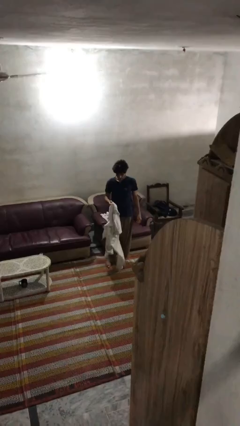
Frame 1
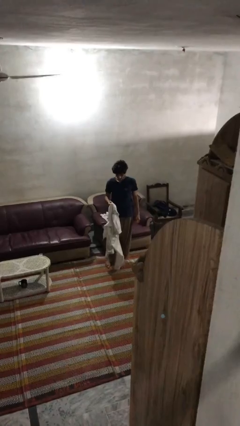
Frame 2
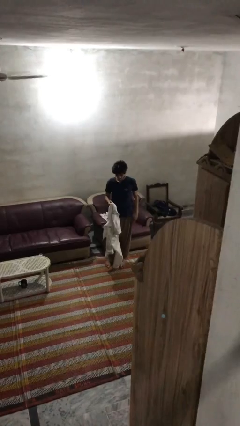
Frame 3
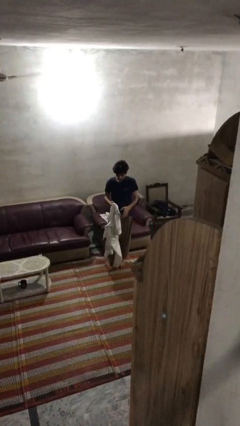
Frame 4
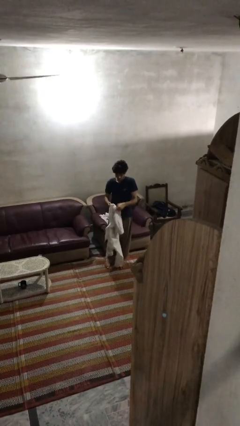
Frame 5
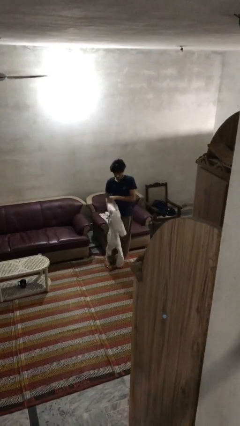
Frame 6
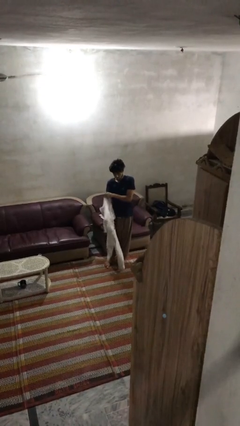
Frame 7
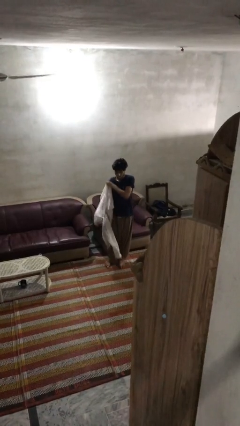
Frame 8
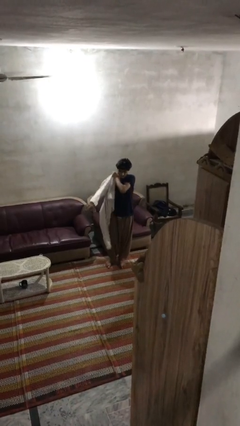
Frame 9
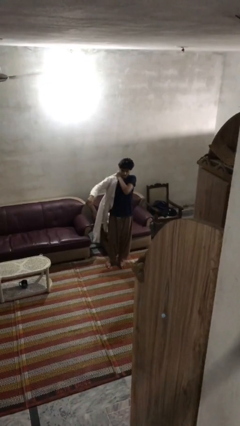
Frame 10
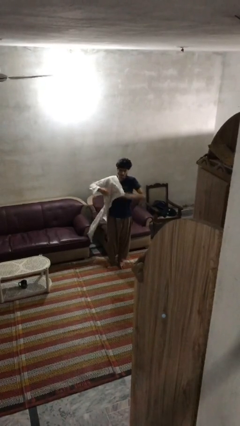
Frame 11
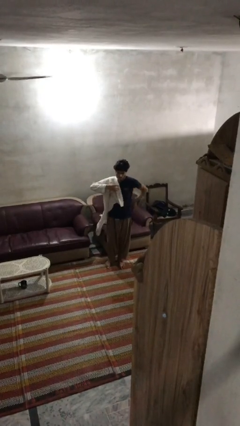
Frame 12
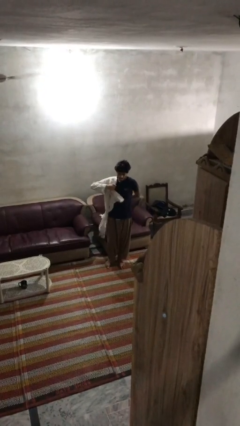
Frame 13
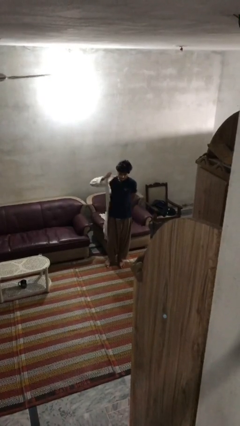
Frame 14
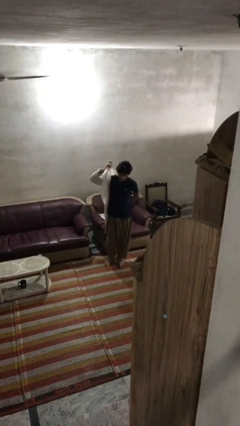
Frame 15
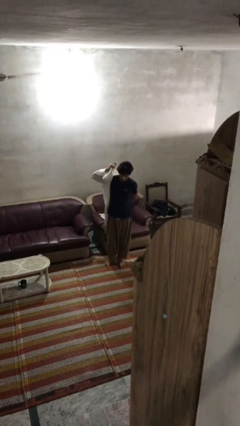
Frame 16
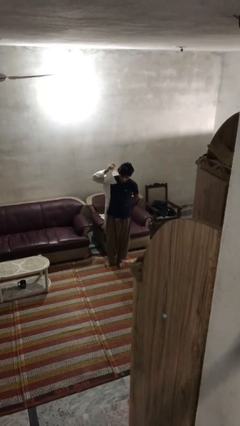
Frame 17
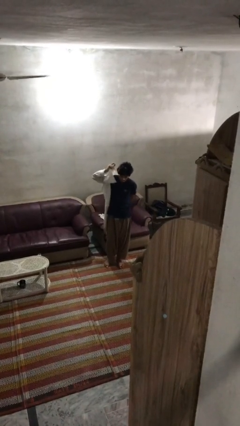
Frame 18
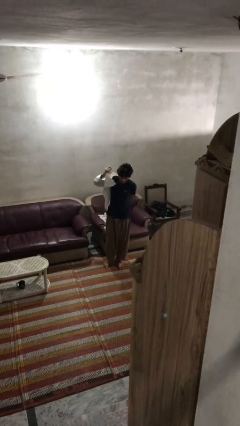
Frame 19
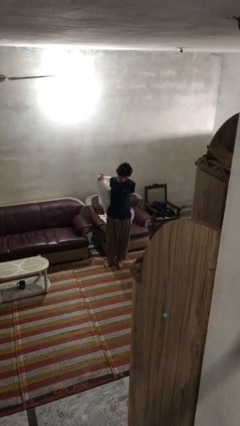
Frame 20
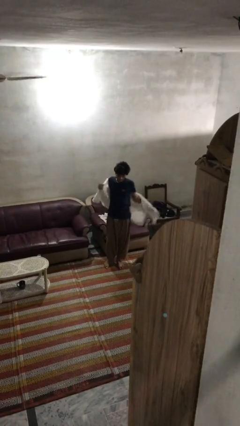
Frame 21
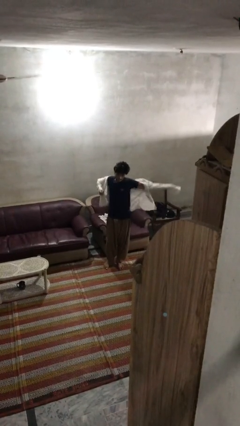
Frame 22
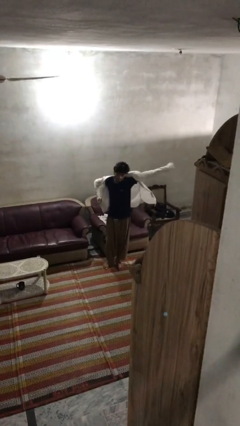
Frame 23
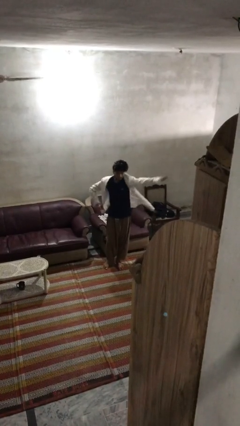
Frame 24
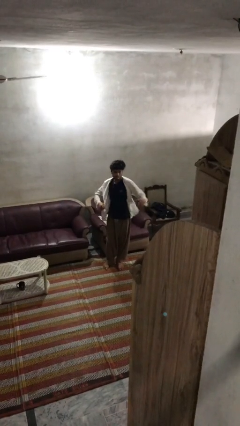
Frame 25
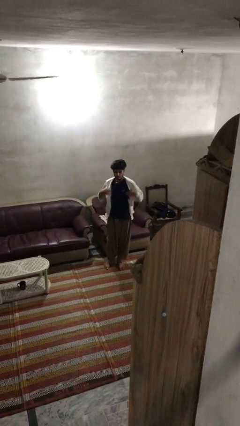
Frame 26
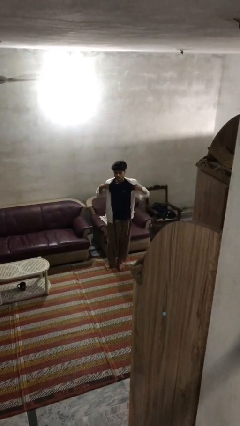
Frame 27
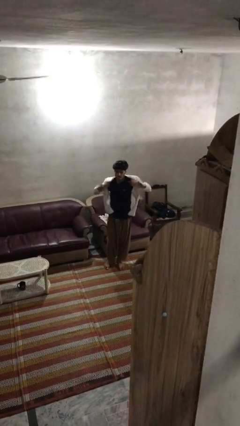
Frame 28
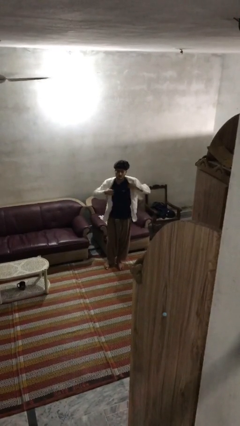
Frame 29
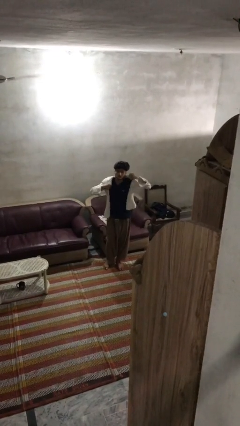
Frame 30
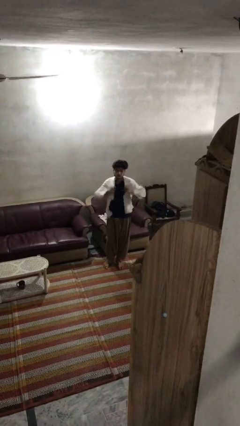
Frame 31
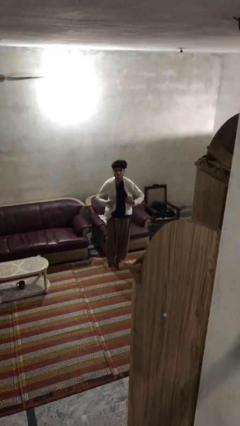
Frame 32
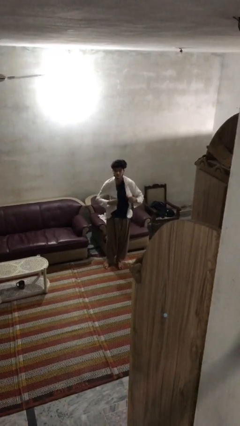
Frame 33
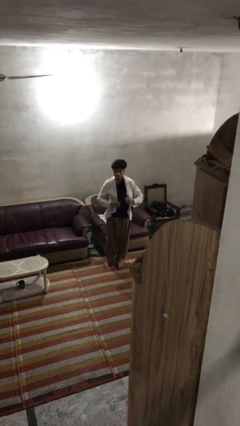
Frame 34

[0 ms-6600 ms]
person puts on shirt

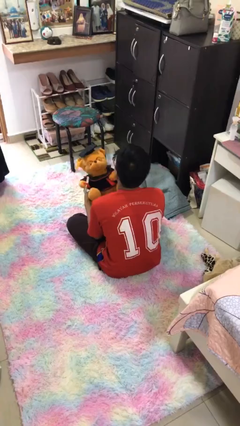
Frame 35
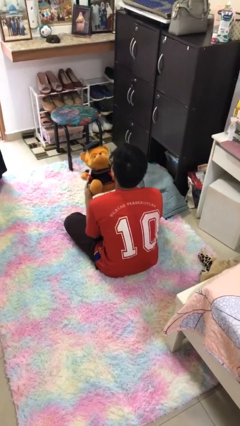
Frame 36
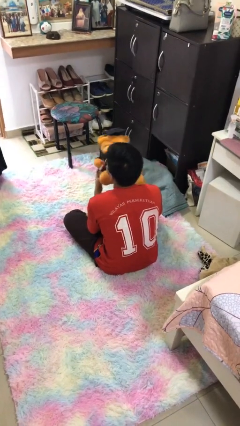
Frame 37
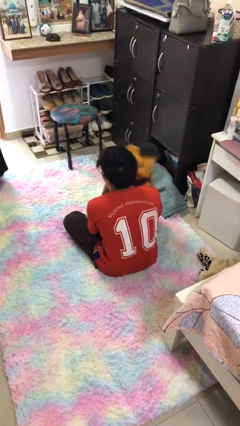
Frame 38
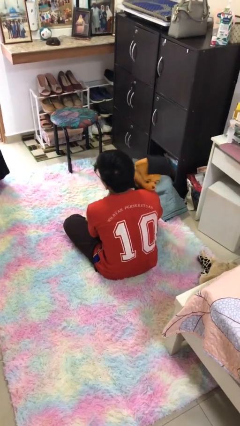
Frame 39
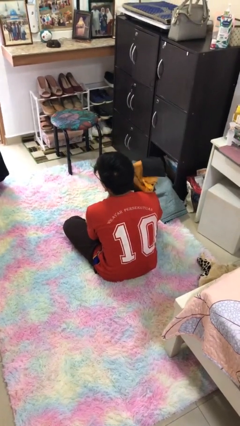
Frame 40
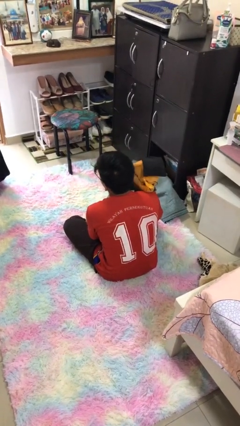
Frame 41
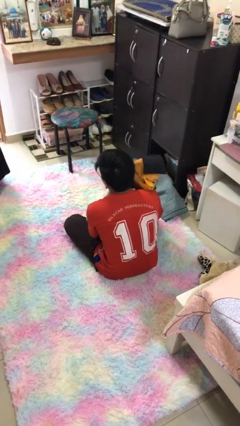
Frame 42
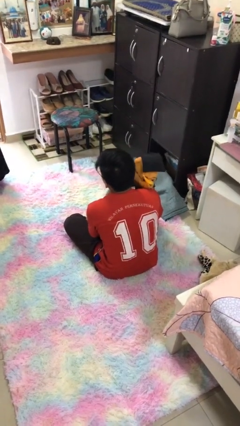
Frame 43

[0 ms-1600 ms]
person hugs stuffed animal

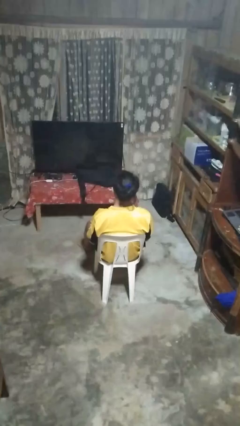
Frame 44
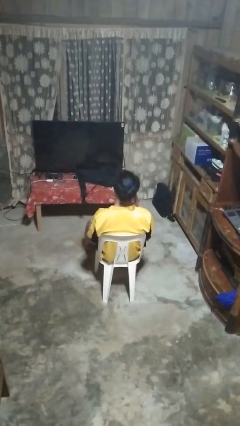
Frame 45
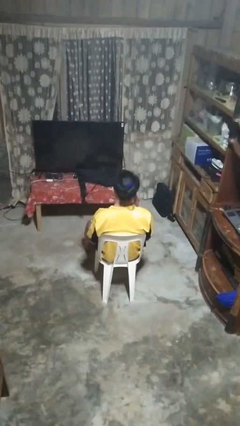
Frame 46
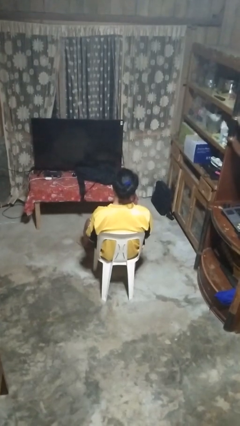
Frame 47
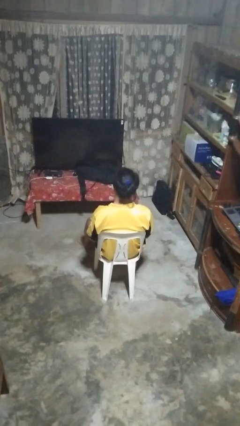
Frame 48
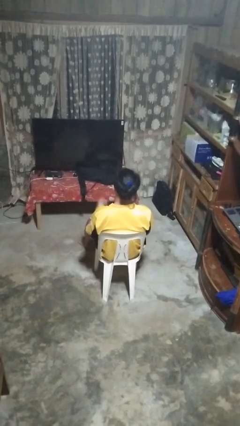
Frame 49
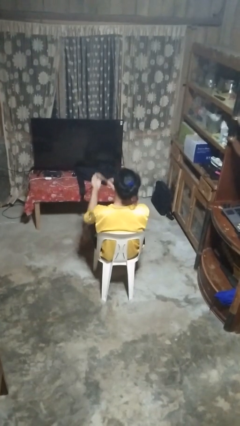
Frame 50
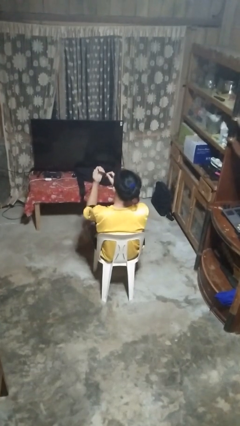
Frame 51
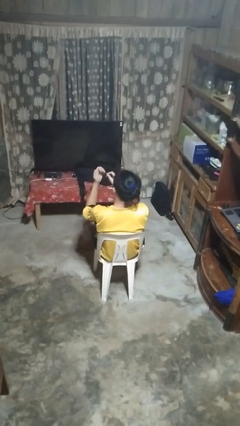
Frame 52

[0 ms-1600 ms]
person files fingernails

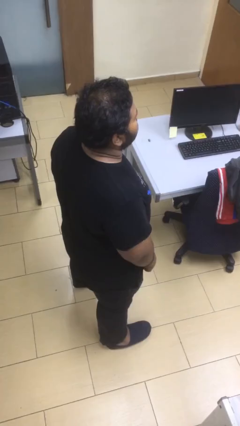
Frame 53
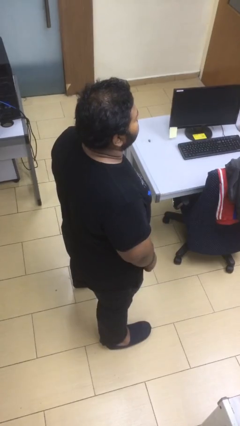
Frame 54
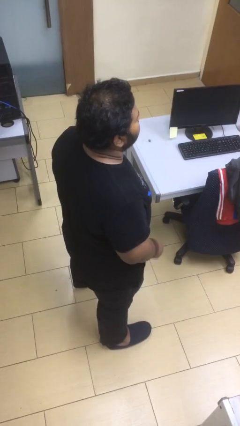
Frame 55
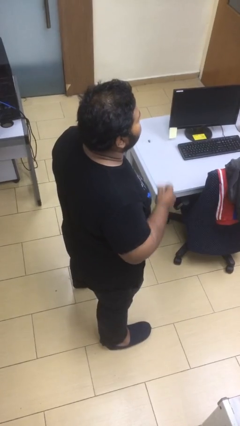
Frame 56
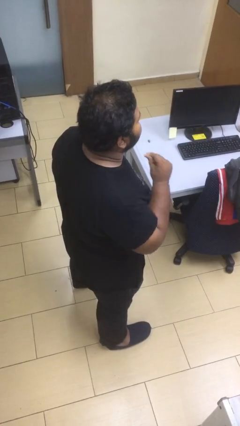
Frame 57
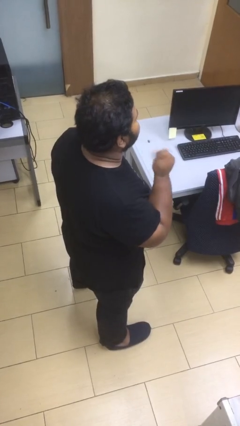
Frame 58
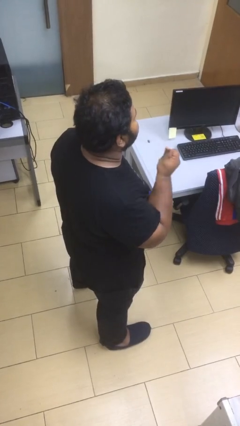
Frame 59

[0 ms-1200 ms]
person snaps fingers

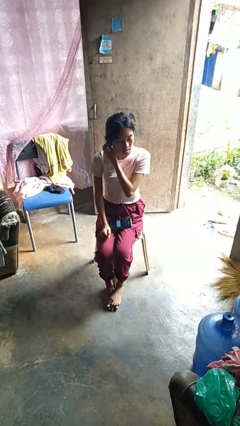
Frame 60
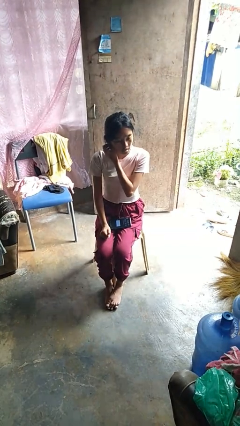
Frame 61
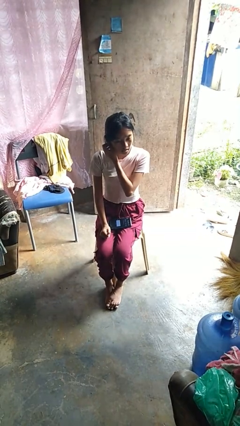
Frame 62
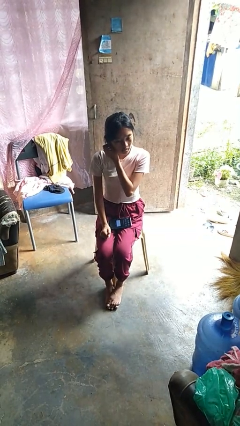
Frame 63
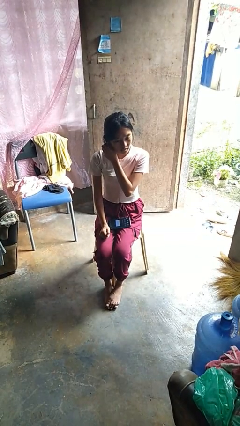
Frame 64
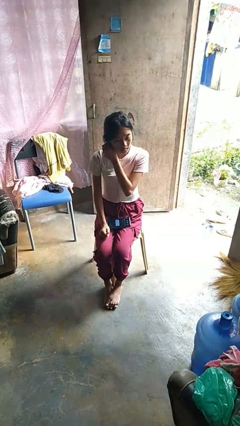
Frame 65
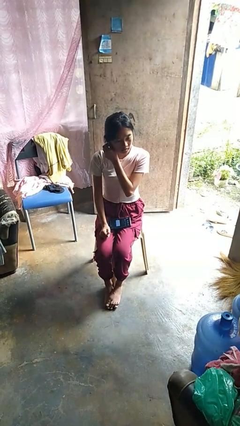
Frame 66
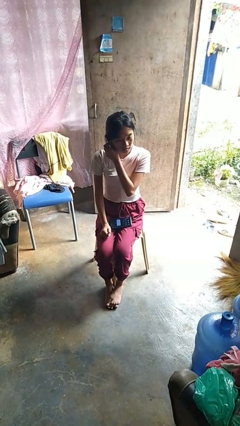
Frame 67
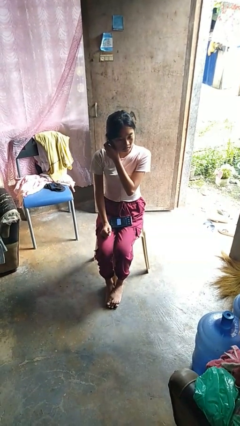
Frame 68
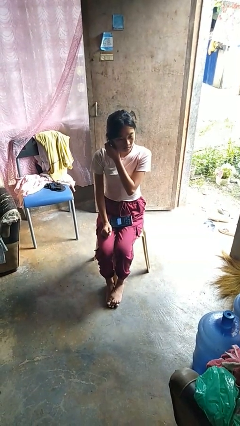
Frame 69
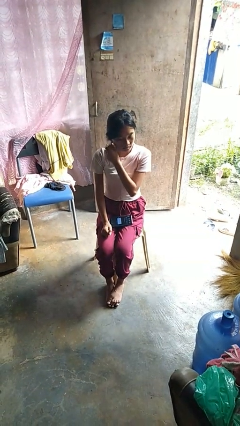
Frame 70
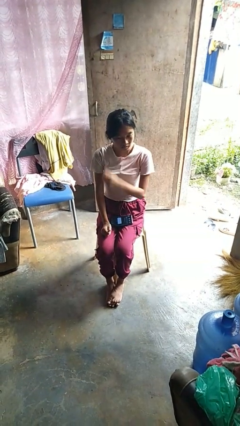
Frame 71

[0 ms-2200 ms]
person touches earlobe

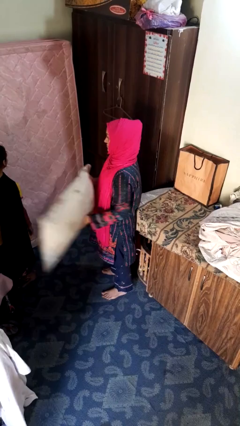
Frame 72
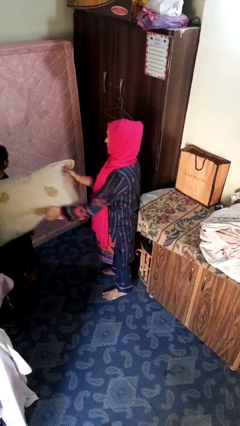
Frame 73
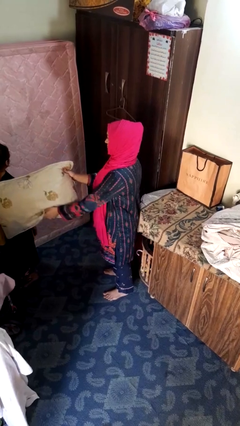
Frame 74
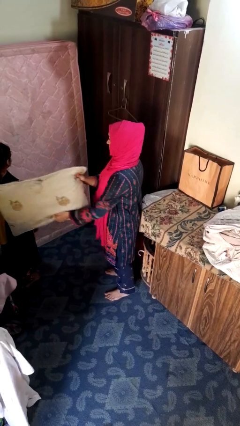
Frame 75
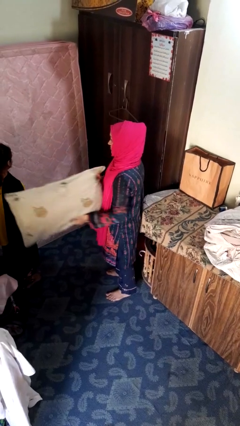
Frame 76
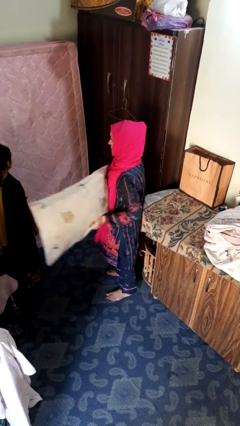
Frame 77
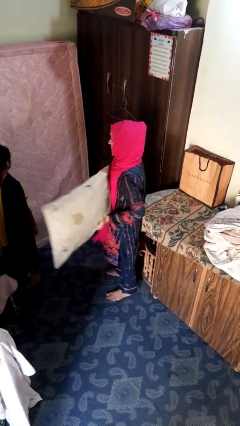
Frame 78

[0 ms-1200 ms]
person hits person with pillow

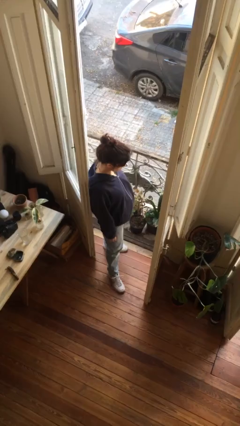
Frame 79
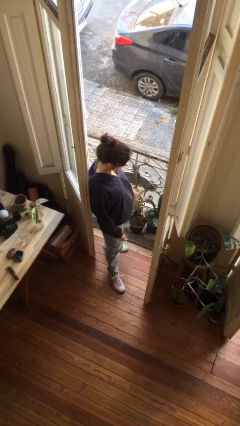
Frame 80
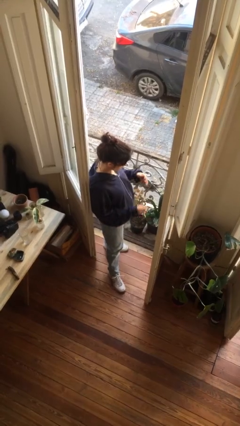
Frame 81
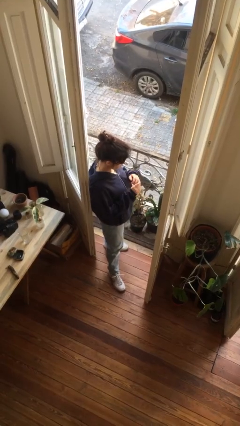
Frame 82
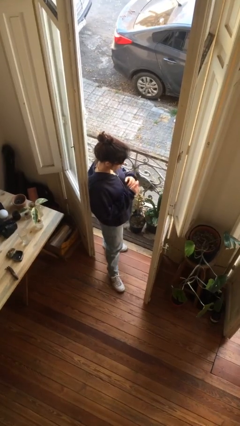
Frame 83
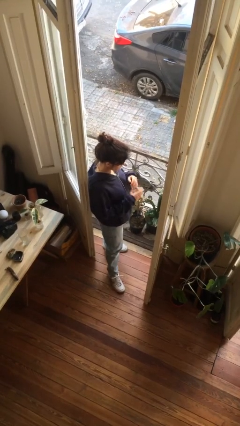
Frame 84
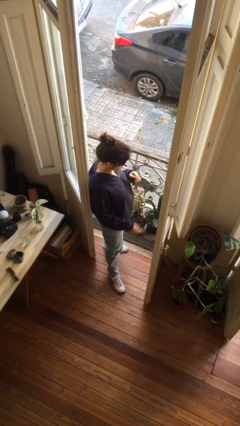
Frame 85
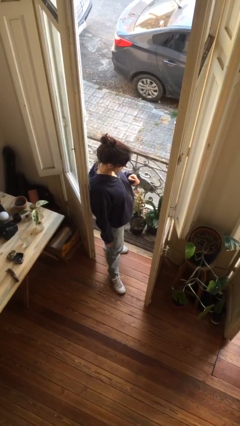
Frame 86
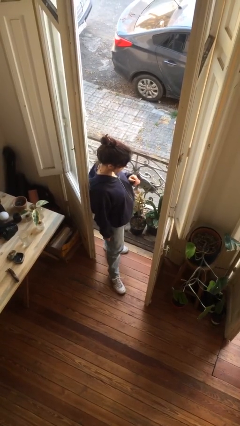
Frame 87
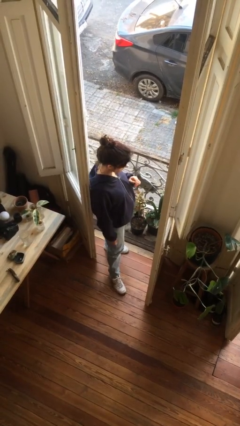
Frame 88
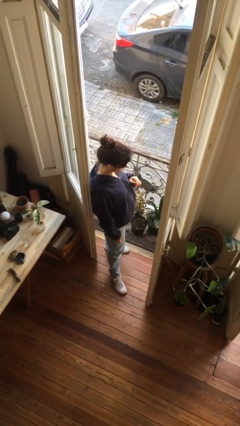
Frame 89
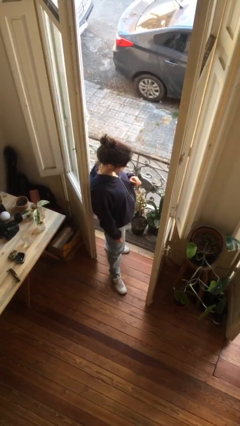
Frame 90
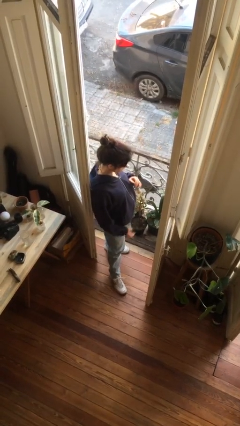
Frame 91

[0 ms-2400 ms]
person puts on ring

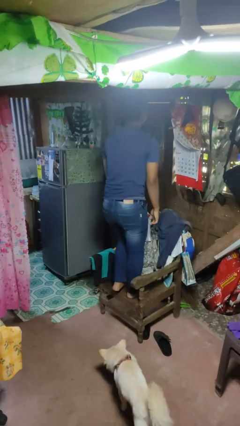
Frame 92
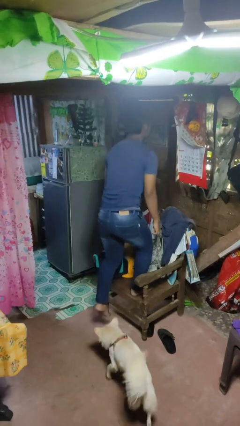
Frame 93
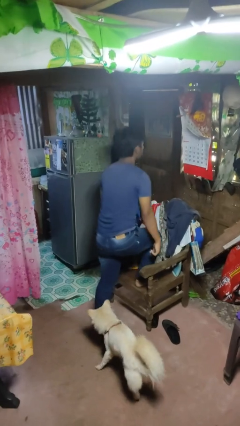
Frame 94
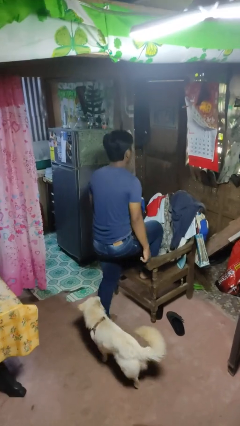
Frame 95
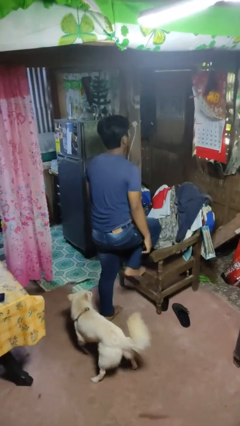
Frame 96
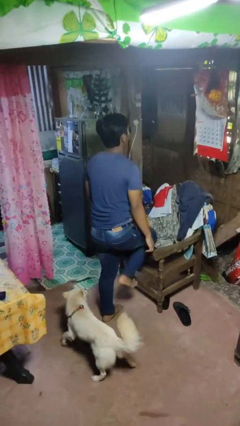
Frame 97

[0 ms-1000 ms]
person climbs off chair
